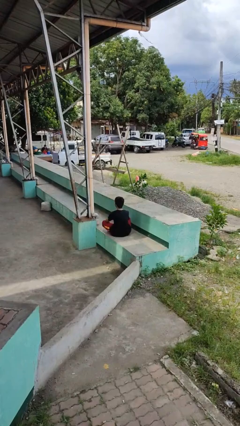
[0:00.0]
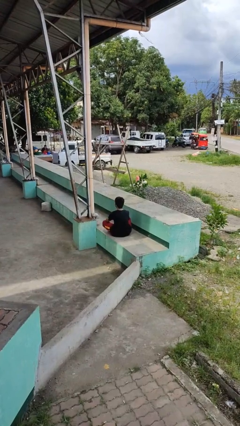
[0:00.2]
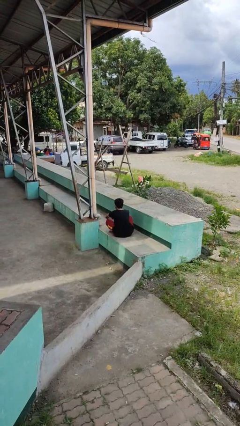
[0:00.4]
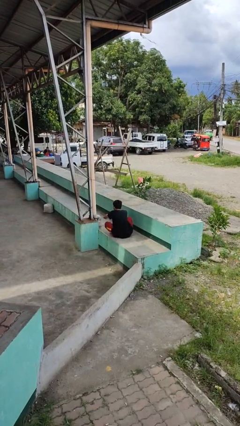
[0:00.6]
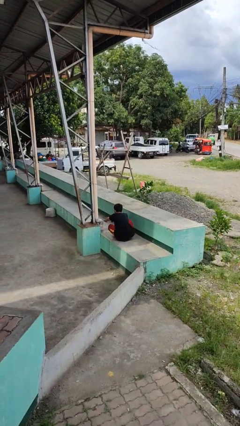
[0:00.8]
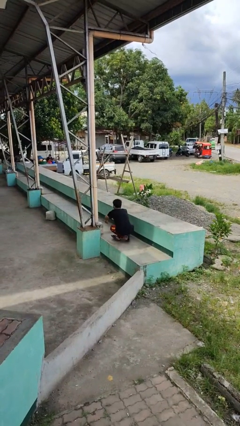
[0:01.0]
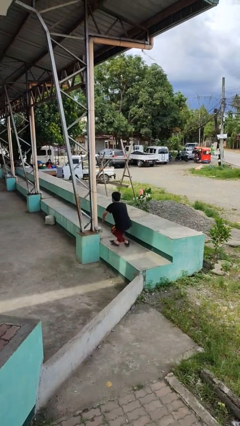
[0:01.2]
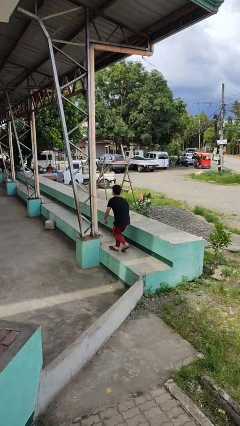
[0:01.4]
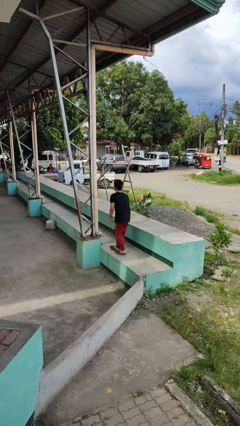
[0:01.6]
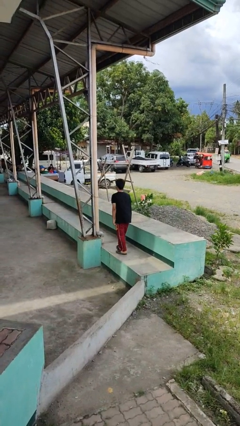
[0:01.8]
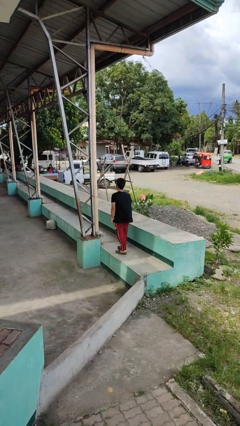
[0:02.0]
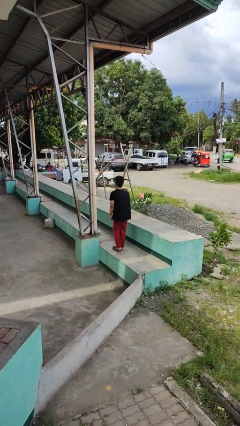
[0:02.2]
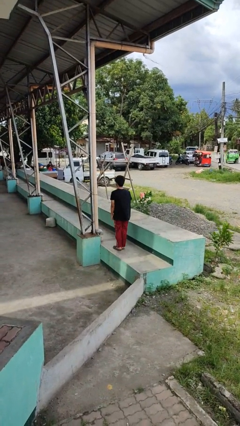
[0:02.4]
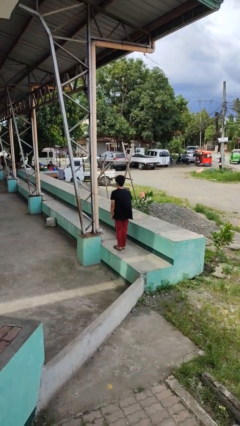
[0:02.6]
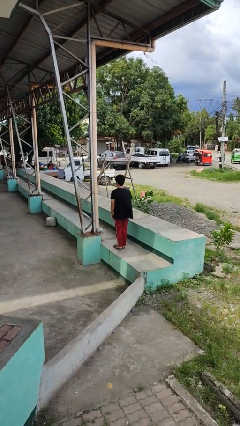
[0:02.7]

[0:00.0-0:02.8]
person stands up from floor

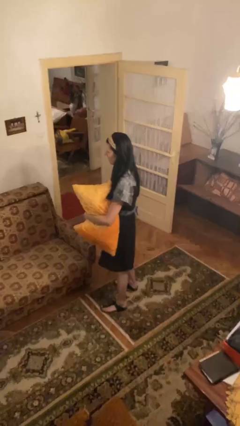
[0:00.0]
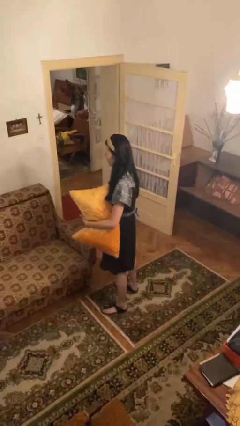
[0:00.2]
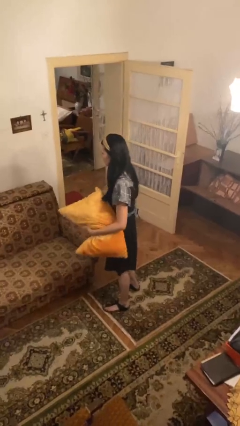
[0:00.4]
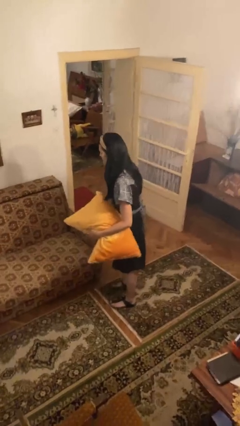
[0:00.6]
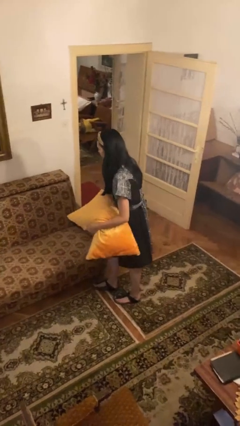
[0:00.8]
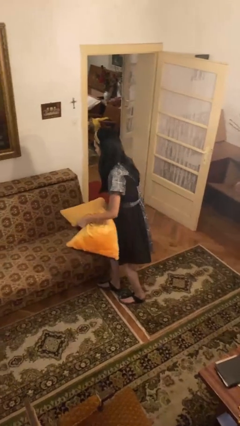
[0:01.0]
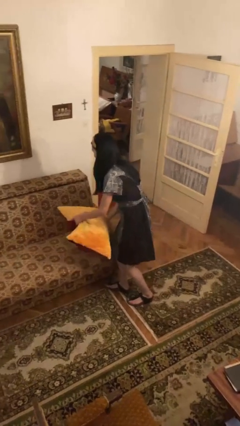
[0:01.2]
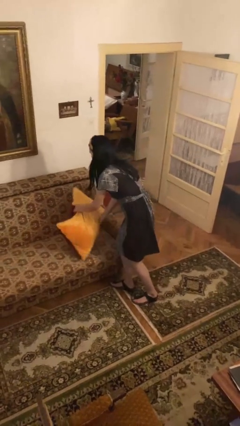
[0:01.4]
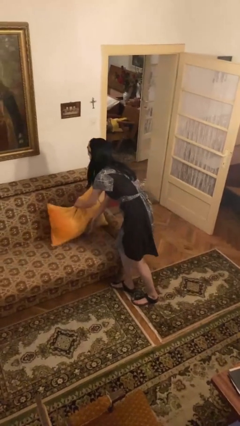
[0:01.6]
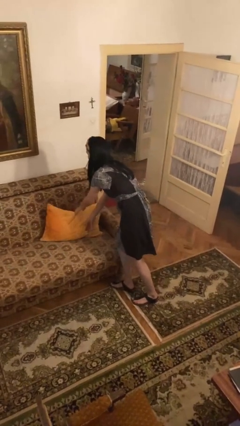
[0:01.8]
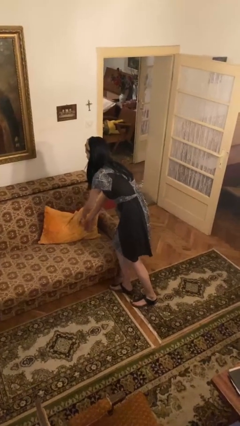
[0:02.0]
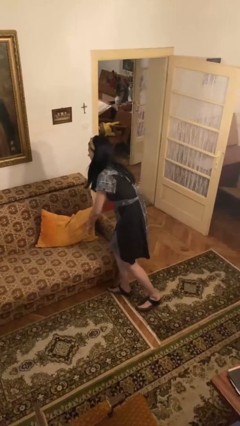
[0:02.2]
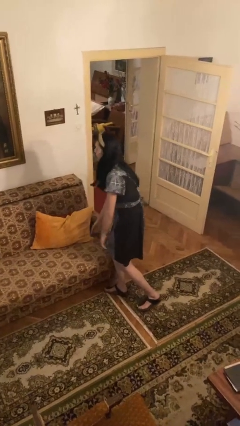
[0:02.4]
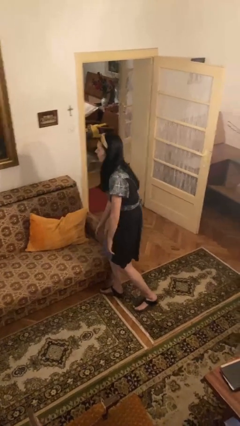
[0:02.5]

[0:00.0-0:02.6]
person puts down object on couch

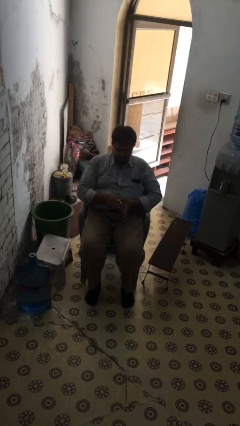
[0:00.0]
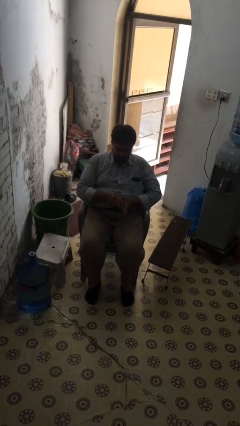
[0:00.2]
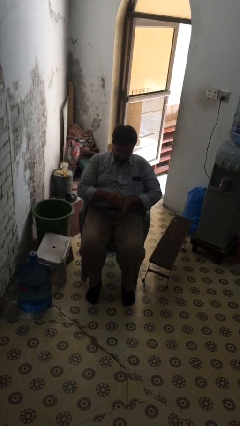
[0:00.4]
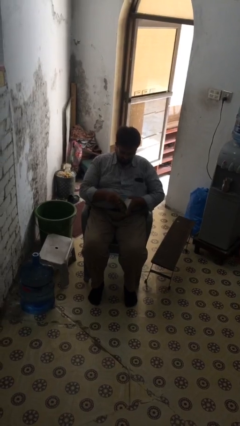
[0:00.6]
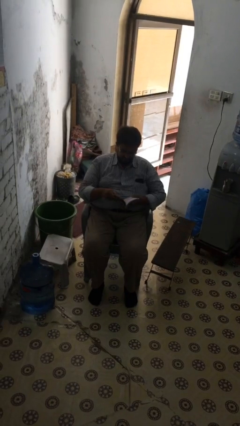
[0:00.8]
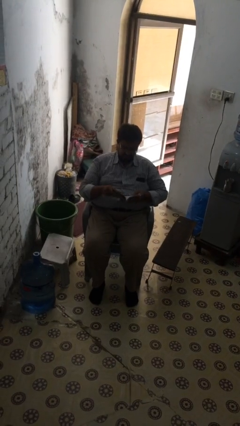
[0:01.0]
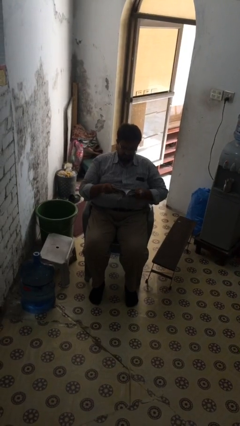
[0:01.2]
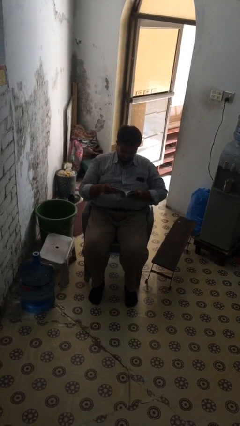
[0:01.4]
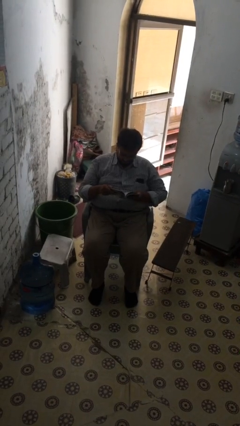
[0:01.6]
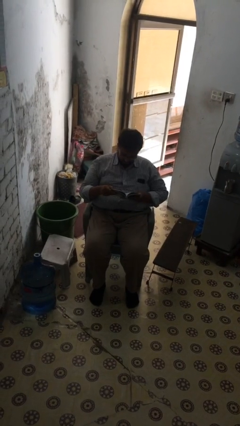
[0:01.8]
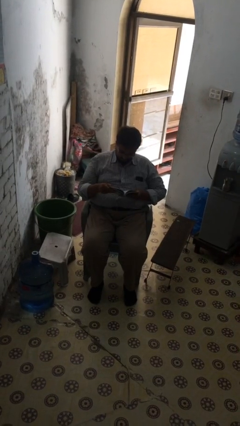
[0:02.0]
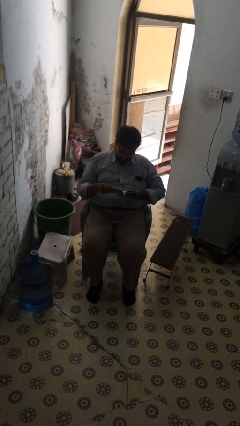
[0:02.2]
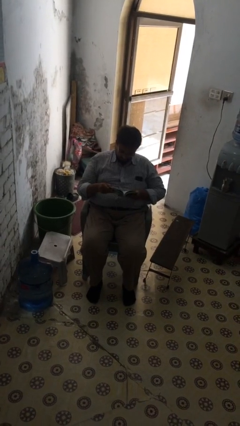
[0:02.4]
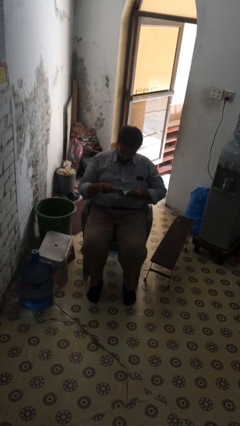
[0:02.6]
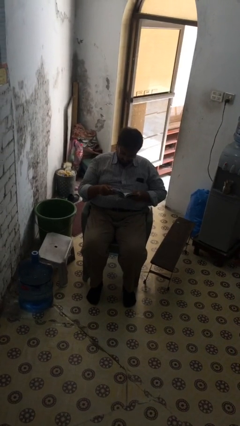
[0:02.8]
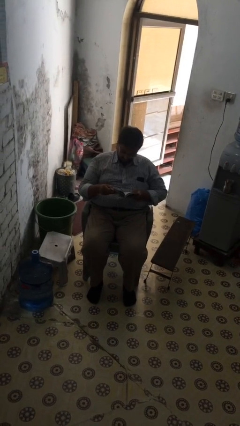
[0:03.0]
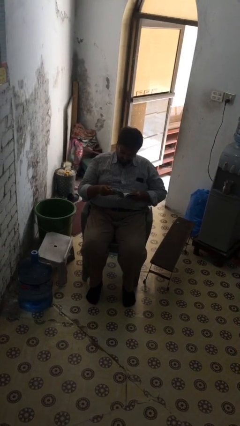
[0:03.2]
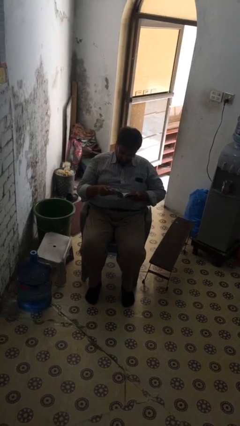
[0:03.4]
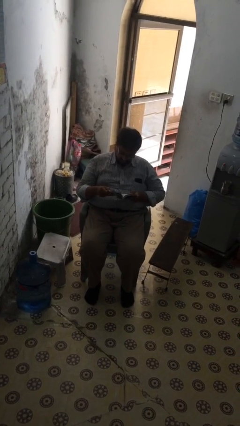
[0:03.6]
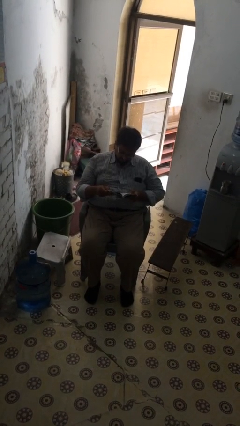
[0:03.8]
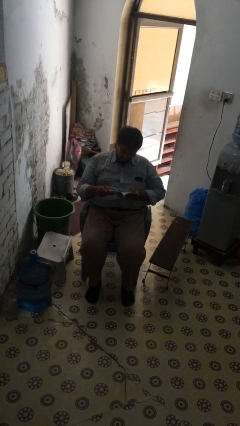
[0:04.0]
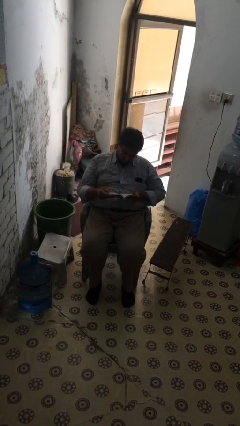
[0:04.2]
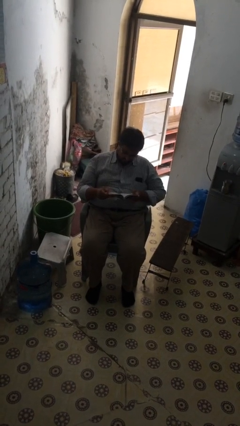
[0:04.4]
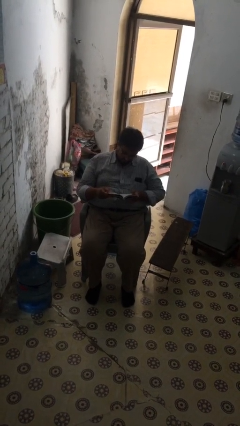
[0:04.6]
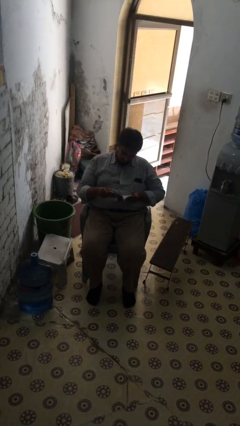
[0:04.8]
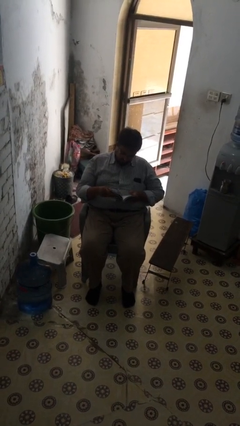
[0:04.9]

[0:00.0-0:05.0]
person reads document

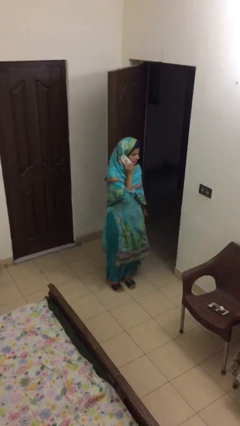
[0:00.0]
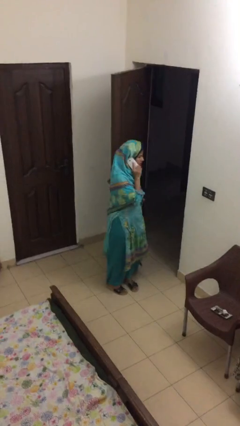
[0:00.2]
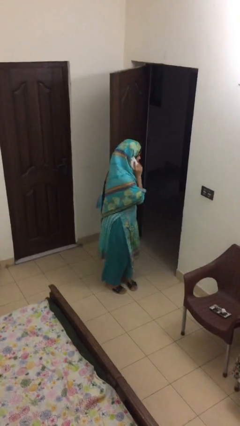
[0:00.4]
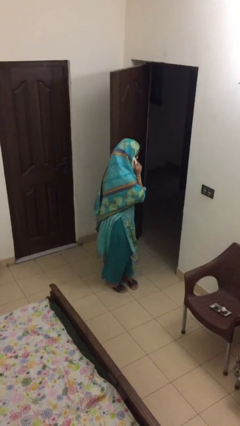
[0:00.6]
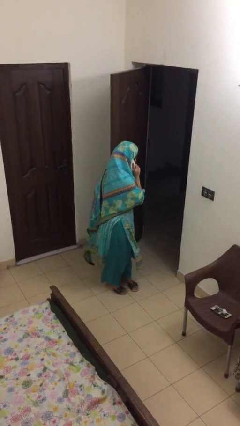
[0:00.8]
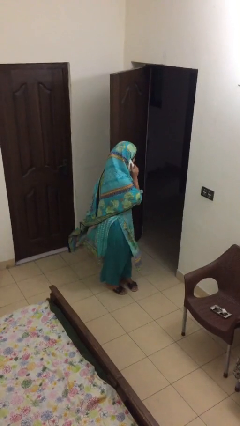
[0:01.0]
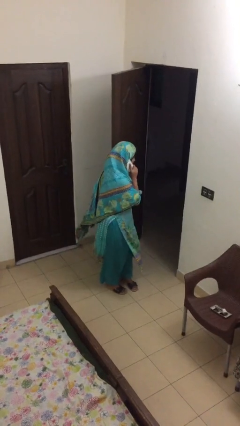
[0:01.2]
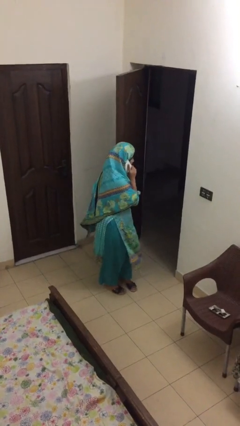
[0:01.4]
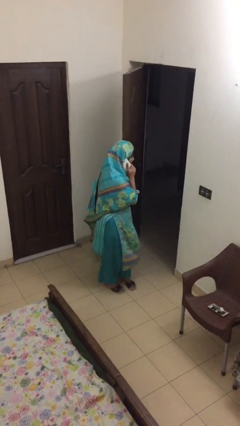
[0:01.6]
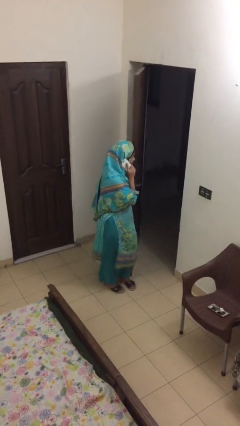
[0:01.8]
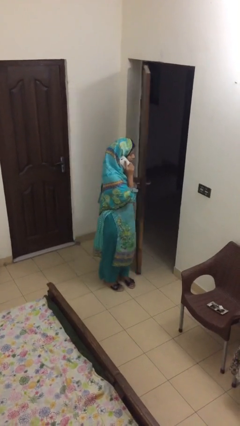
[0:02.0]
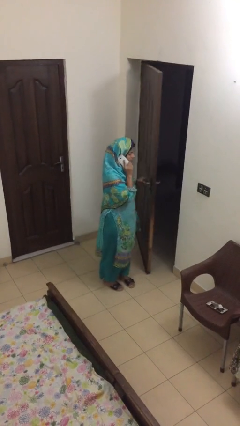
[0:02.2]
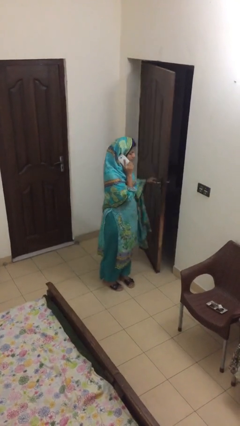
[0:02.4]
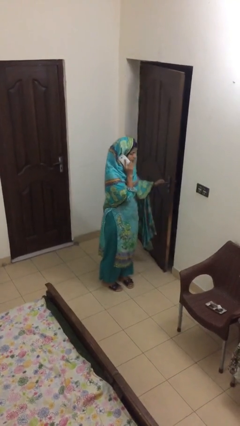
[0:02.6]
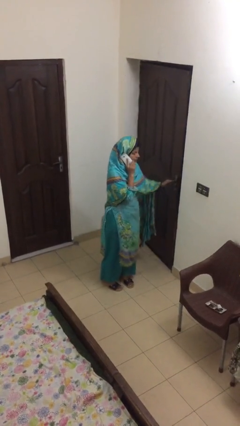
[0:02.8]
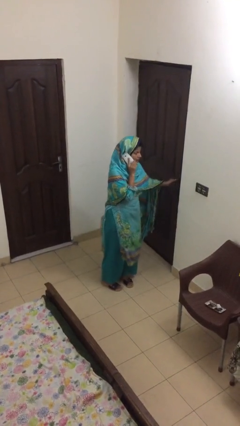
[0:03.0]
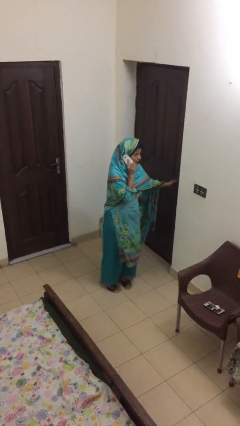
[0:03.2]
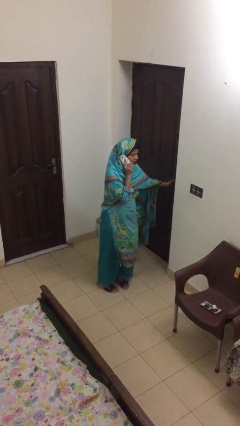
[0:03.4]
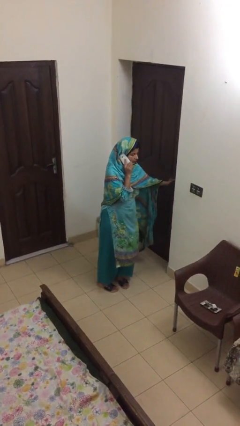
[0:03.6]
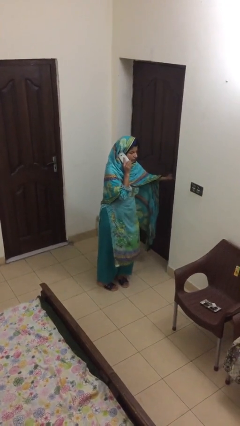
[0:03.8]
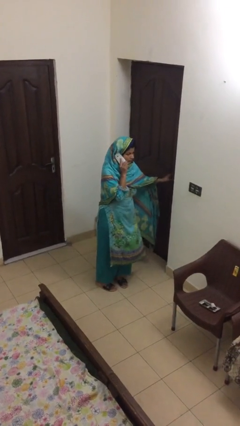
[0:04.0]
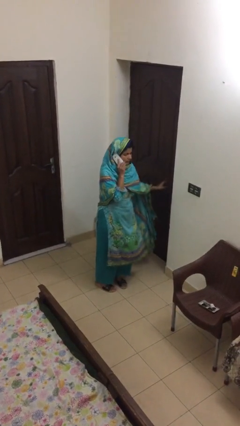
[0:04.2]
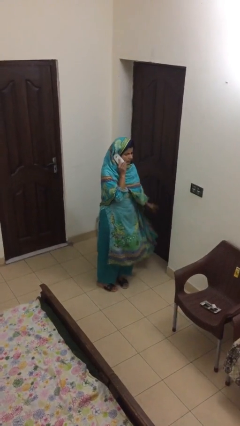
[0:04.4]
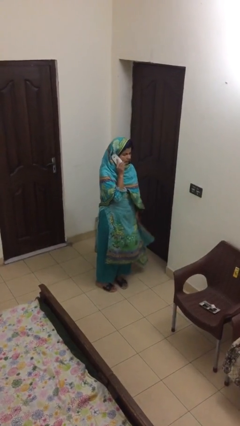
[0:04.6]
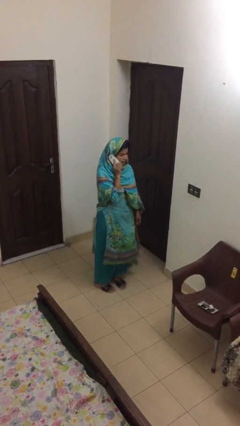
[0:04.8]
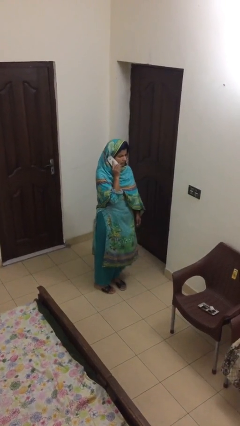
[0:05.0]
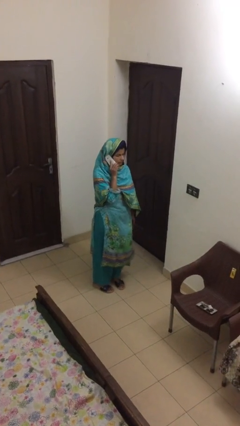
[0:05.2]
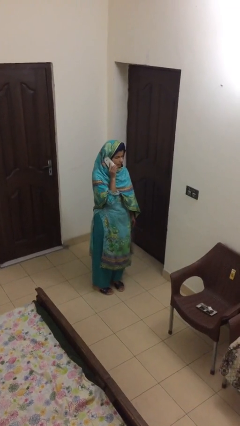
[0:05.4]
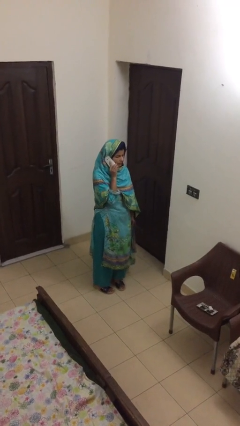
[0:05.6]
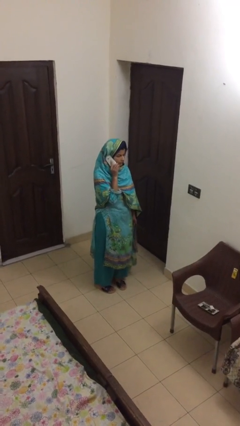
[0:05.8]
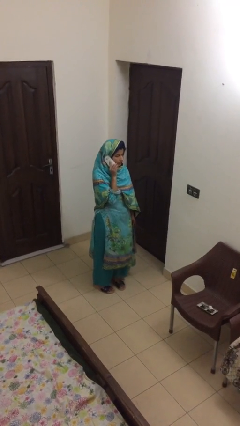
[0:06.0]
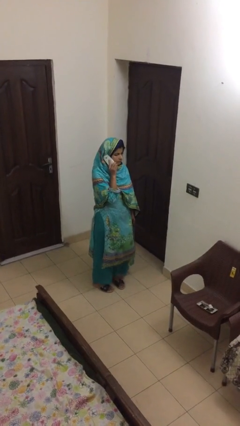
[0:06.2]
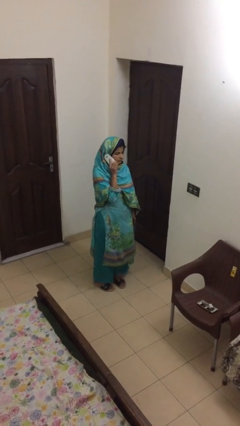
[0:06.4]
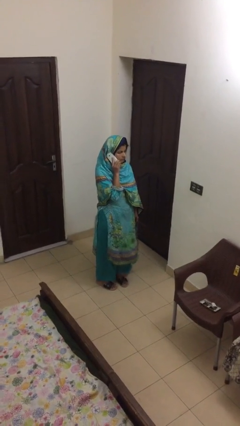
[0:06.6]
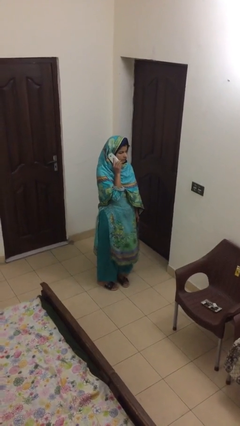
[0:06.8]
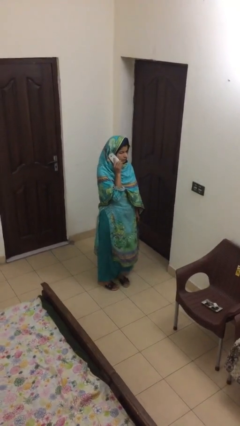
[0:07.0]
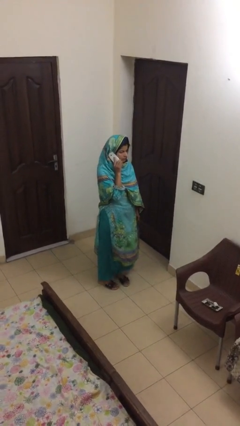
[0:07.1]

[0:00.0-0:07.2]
person closes facility door

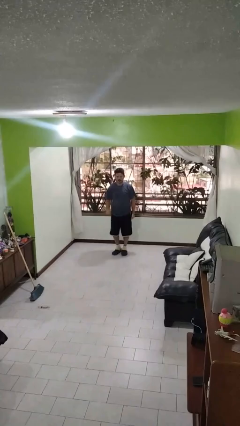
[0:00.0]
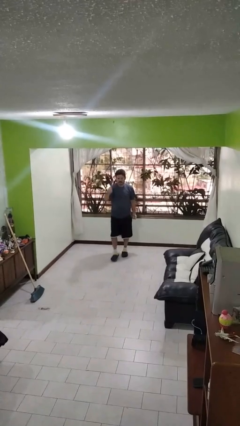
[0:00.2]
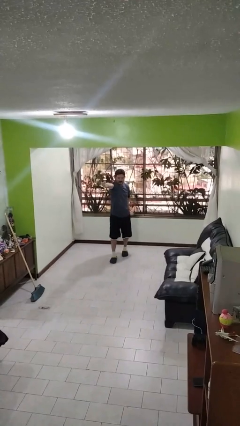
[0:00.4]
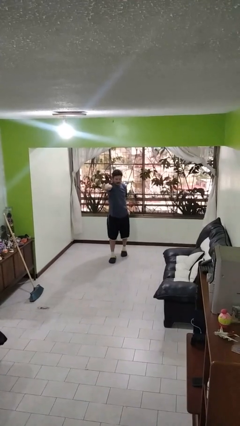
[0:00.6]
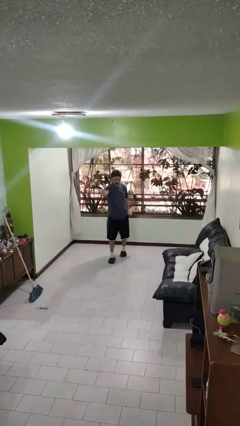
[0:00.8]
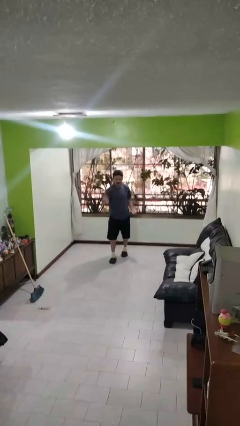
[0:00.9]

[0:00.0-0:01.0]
person punches
